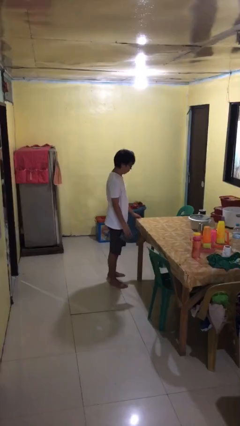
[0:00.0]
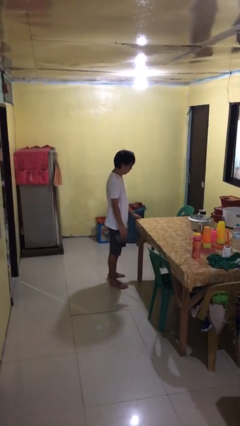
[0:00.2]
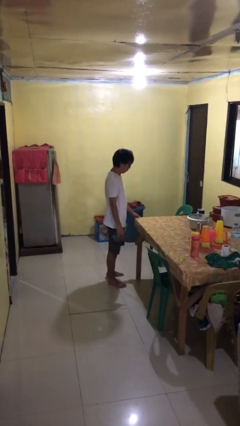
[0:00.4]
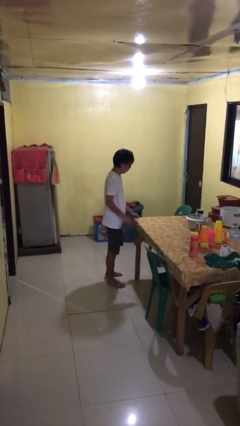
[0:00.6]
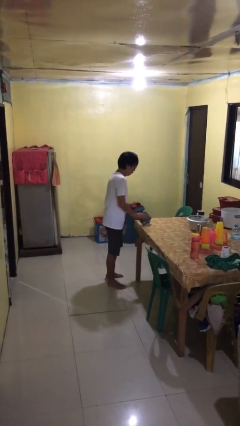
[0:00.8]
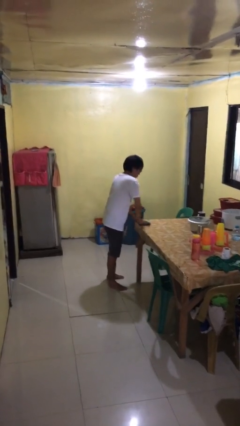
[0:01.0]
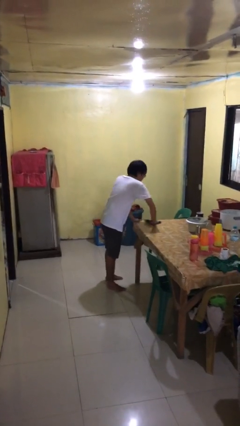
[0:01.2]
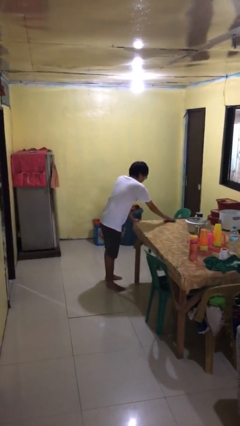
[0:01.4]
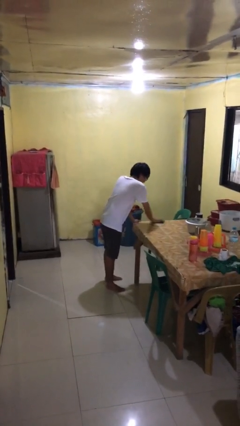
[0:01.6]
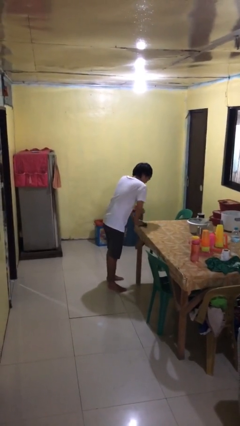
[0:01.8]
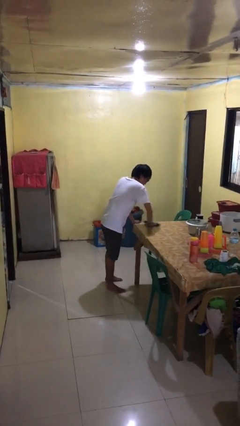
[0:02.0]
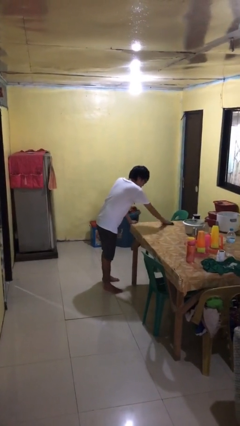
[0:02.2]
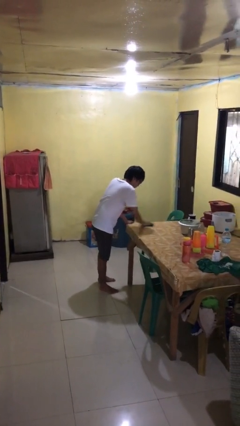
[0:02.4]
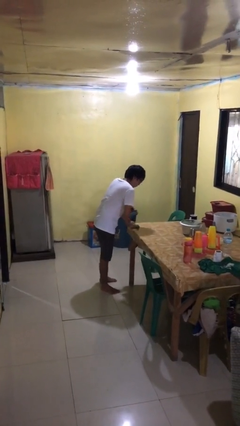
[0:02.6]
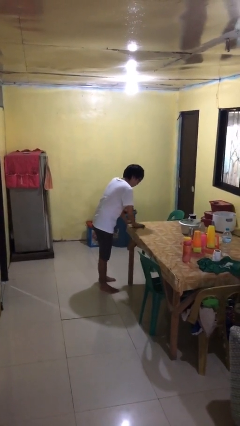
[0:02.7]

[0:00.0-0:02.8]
person cleans table with rag

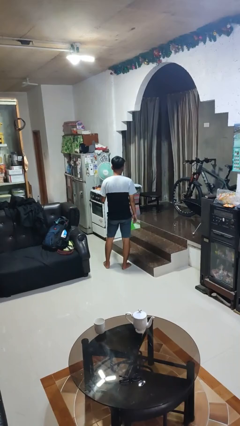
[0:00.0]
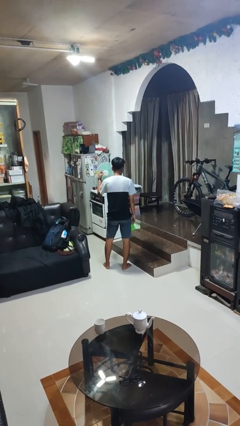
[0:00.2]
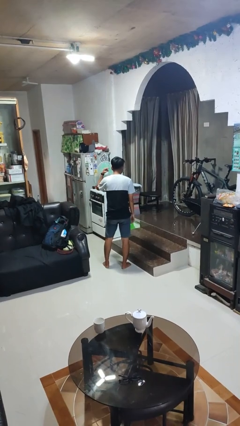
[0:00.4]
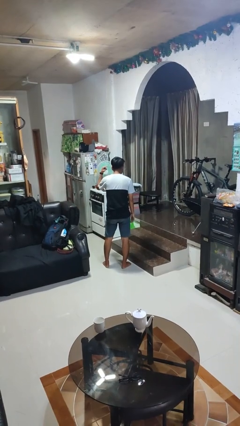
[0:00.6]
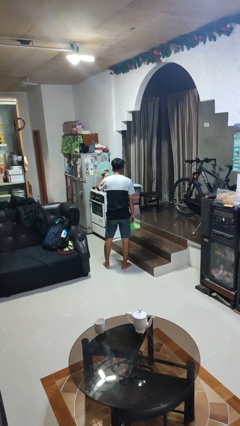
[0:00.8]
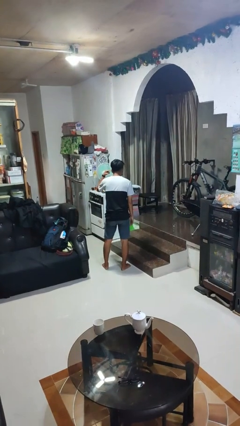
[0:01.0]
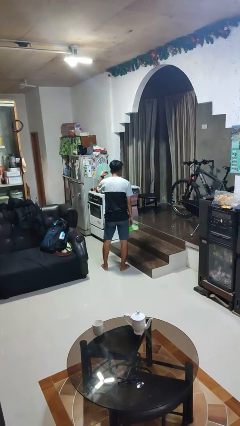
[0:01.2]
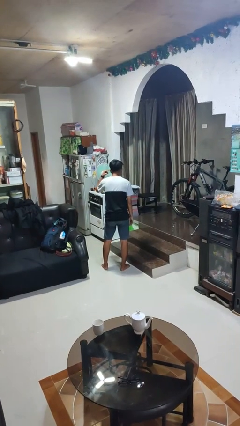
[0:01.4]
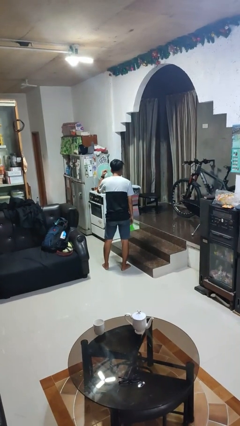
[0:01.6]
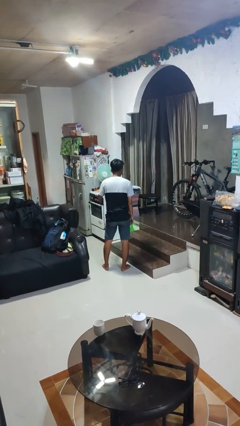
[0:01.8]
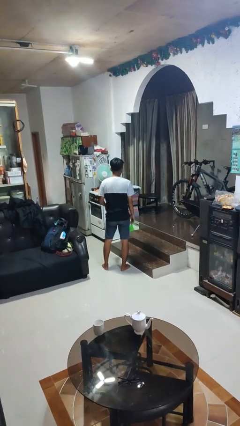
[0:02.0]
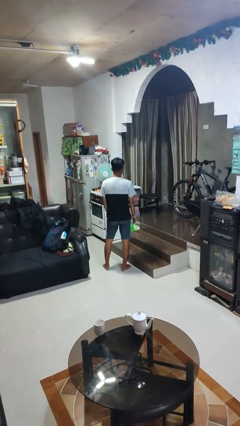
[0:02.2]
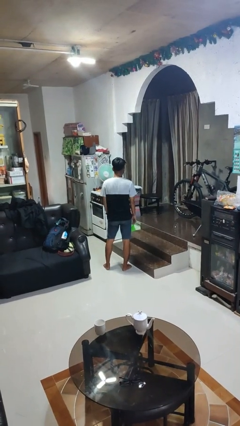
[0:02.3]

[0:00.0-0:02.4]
person gestures listen closely

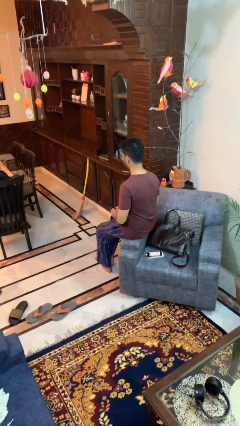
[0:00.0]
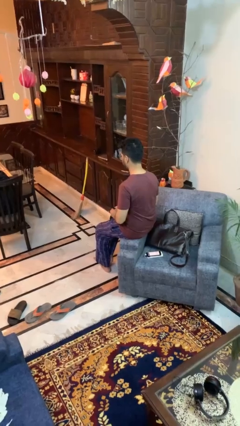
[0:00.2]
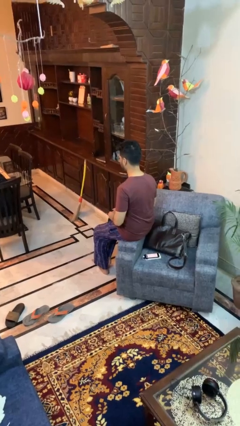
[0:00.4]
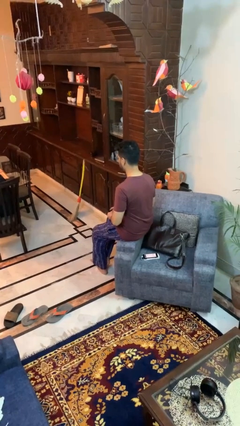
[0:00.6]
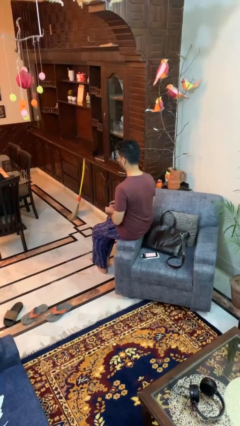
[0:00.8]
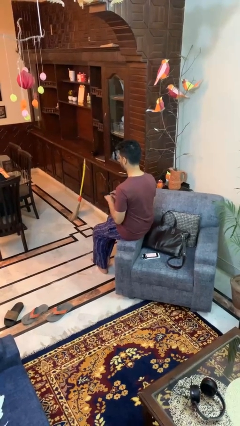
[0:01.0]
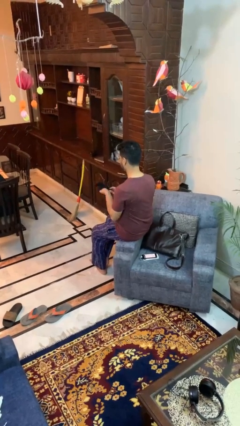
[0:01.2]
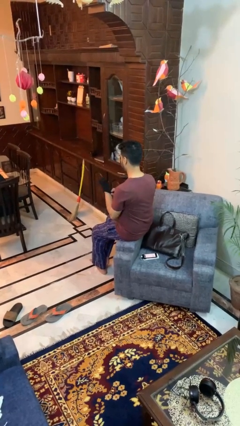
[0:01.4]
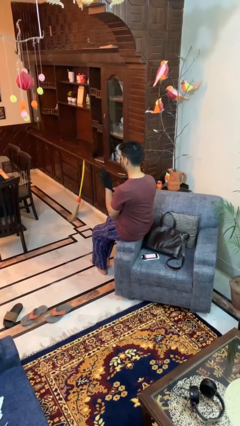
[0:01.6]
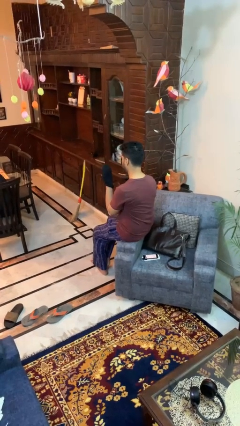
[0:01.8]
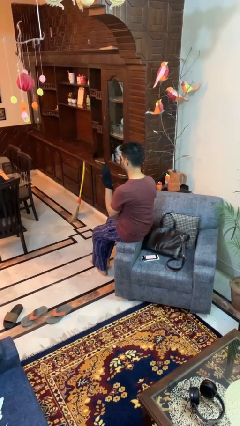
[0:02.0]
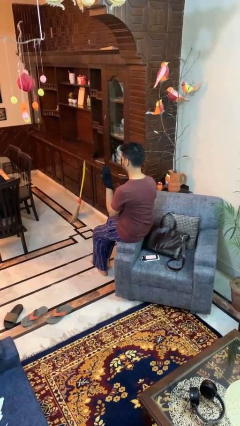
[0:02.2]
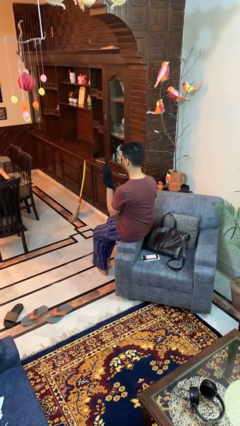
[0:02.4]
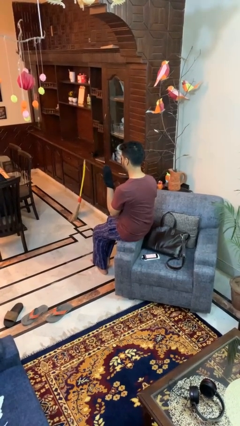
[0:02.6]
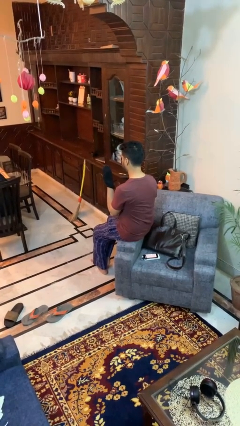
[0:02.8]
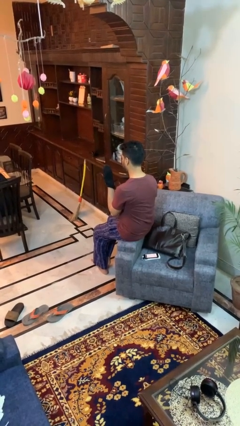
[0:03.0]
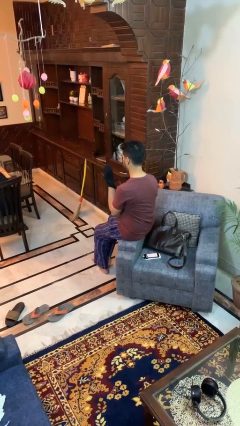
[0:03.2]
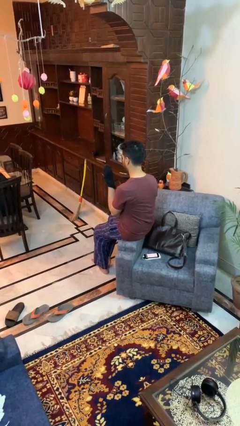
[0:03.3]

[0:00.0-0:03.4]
person puts on gloves

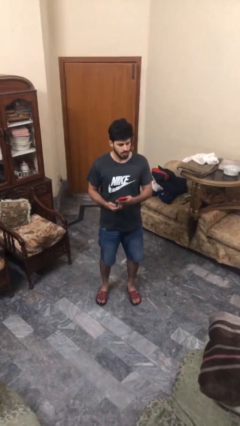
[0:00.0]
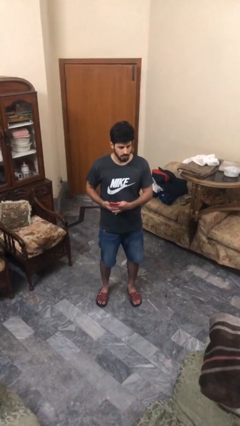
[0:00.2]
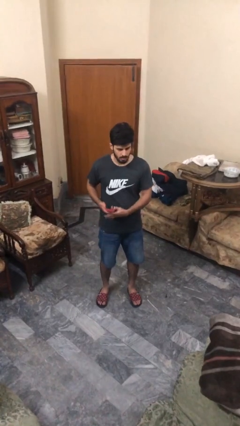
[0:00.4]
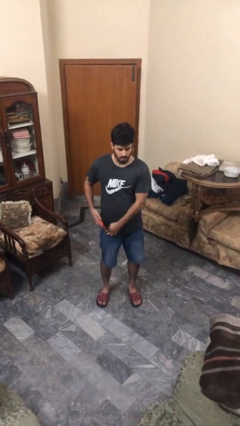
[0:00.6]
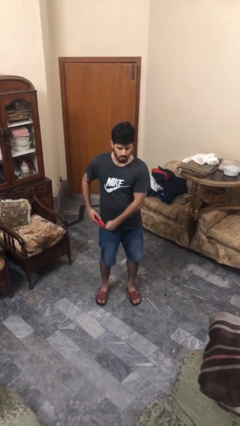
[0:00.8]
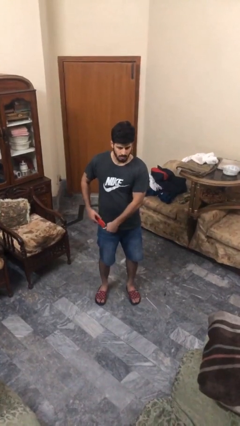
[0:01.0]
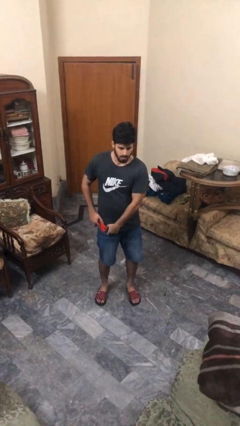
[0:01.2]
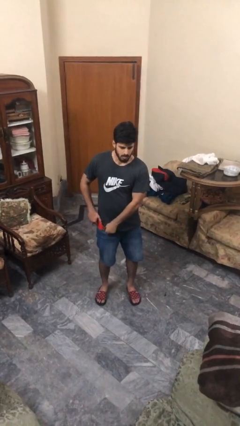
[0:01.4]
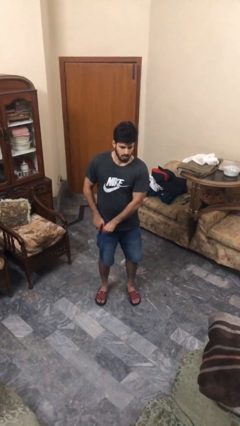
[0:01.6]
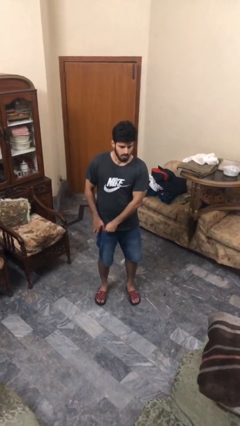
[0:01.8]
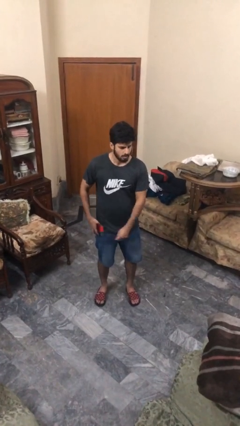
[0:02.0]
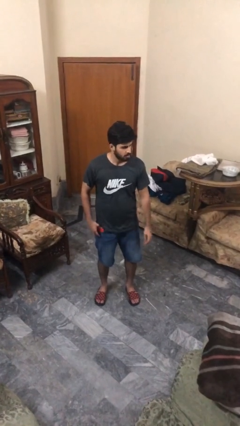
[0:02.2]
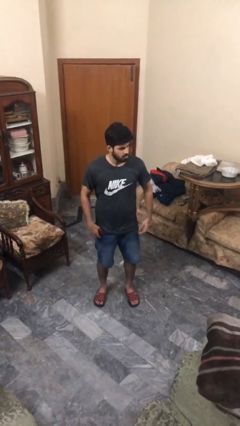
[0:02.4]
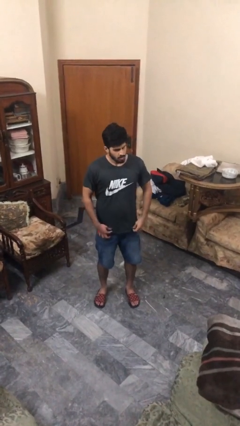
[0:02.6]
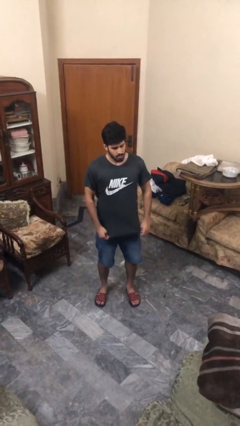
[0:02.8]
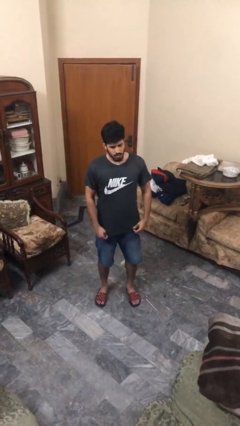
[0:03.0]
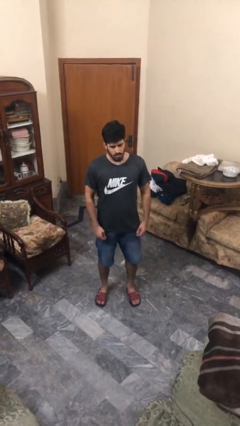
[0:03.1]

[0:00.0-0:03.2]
person puts phone into pocket

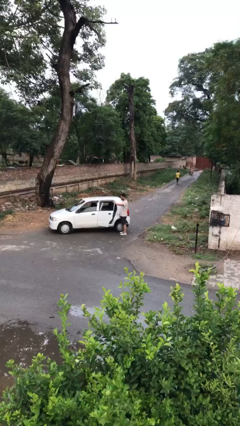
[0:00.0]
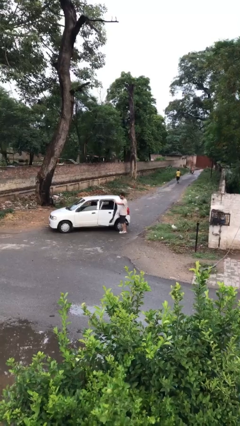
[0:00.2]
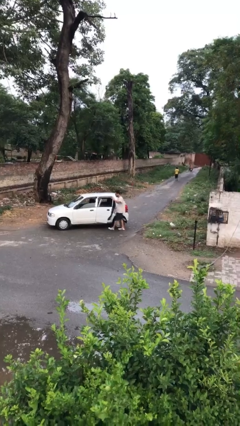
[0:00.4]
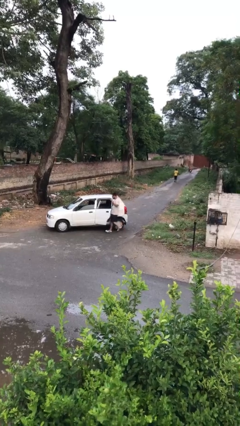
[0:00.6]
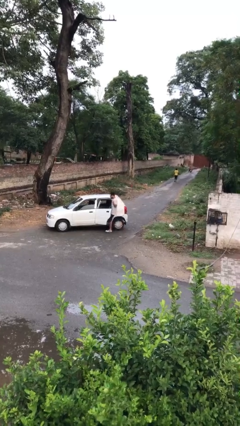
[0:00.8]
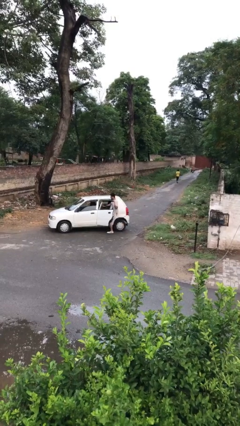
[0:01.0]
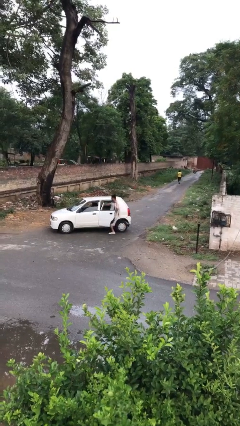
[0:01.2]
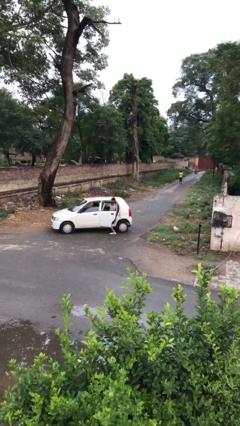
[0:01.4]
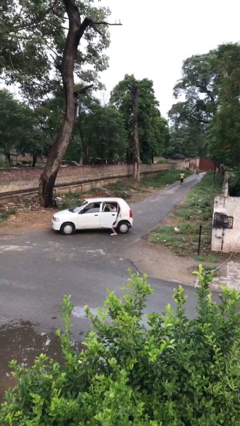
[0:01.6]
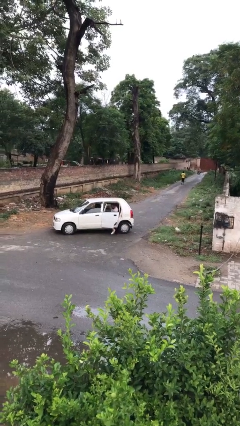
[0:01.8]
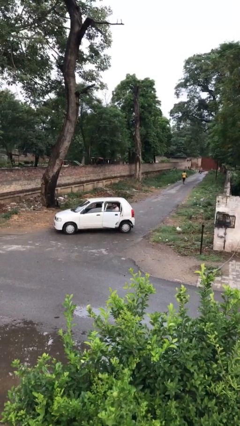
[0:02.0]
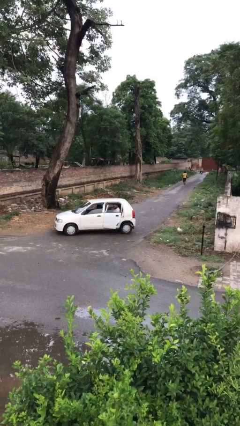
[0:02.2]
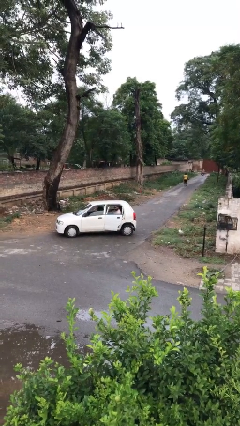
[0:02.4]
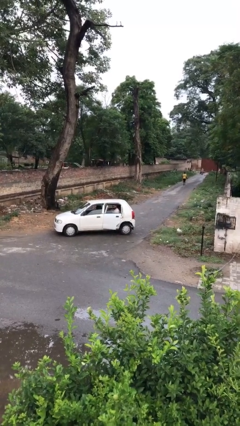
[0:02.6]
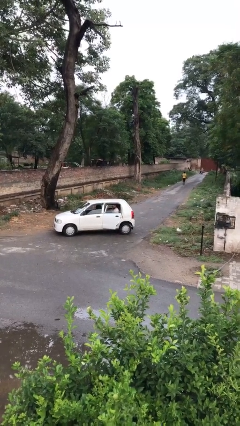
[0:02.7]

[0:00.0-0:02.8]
person enters car

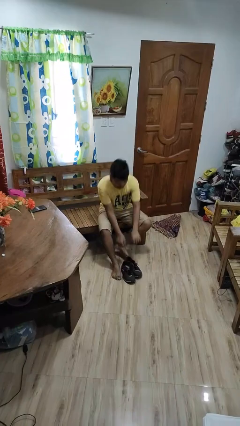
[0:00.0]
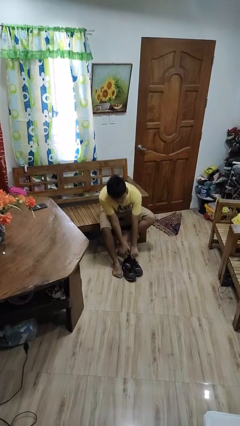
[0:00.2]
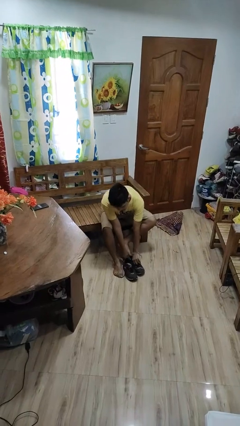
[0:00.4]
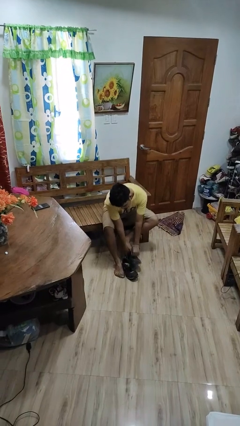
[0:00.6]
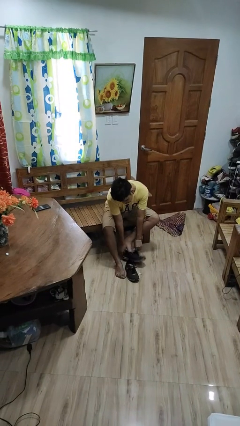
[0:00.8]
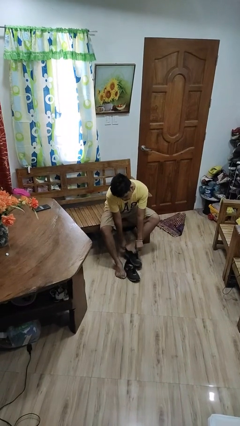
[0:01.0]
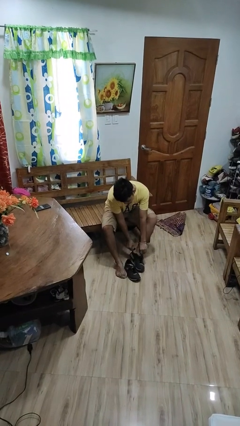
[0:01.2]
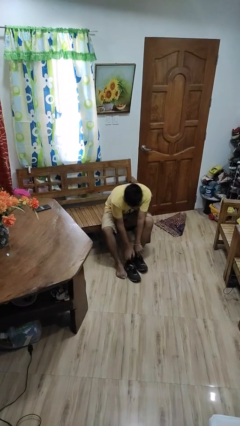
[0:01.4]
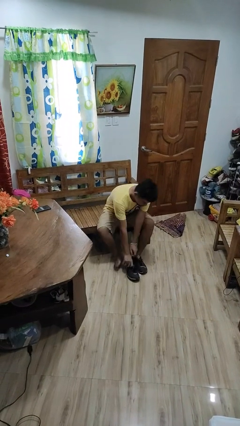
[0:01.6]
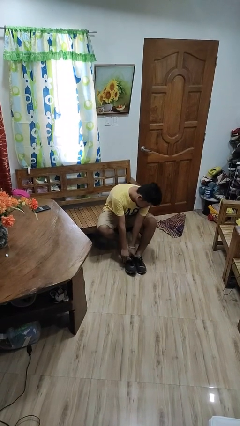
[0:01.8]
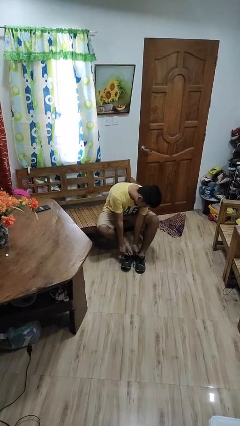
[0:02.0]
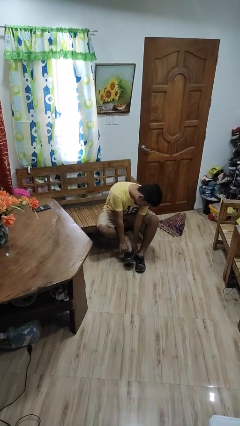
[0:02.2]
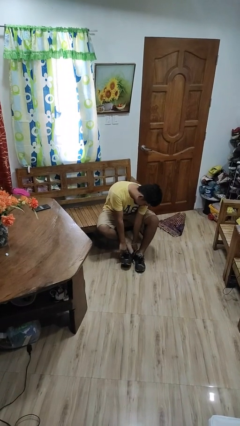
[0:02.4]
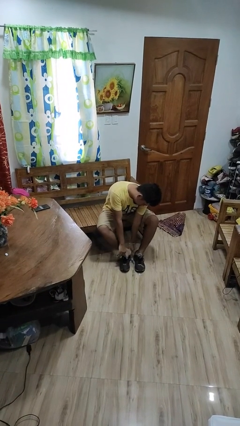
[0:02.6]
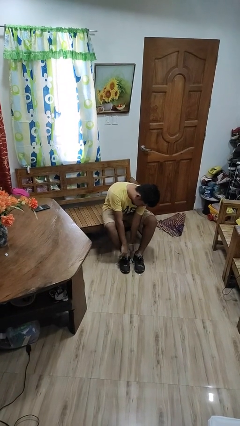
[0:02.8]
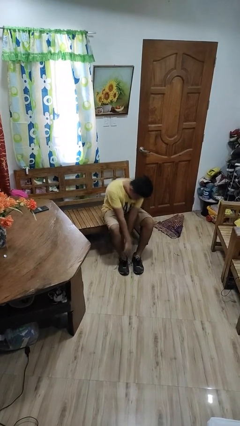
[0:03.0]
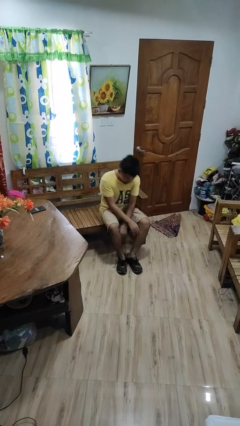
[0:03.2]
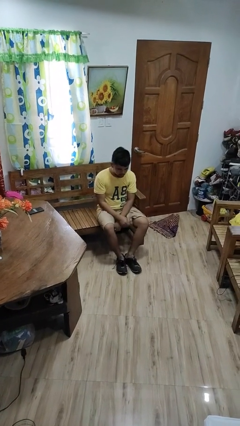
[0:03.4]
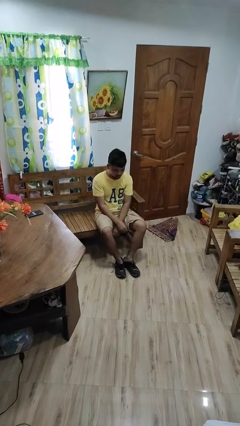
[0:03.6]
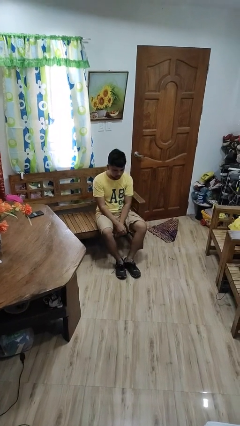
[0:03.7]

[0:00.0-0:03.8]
person puts on shoes
